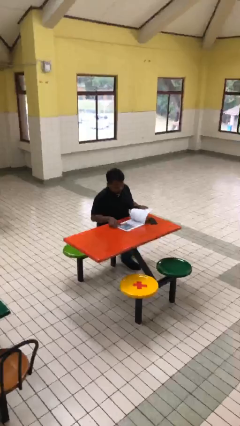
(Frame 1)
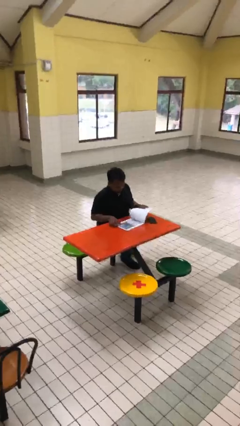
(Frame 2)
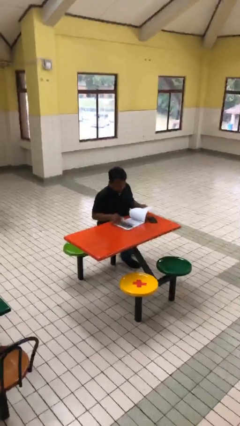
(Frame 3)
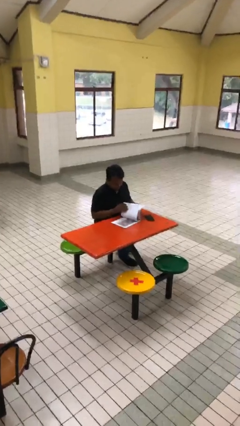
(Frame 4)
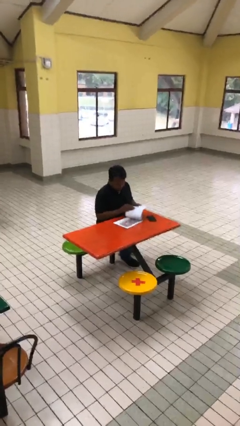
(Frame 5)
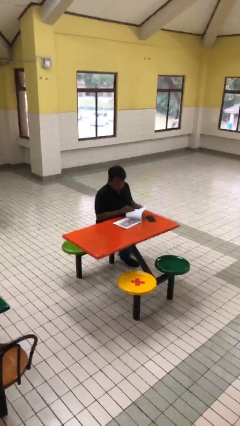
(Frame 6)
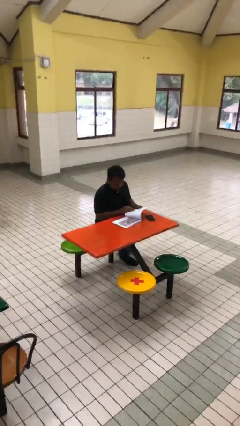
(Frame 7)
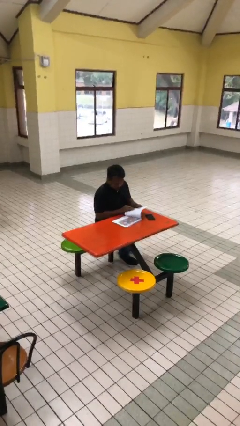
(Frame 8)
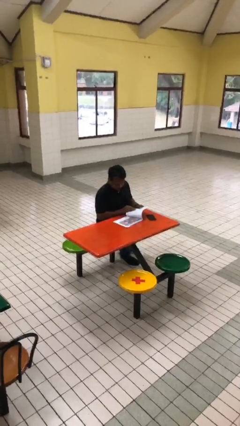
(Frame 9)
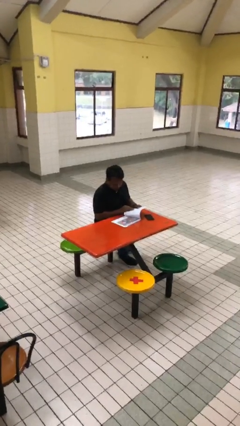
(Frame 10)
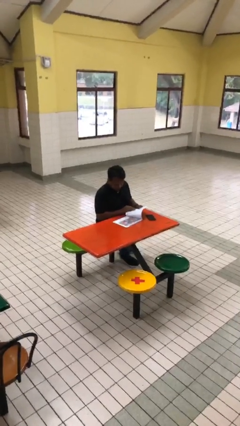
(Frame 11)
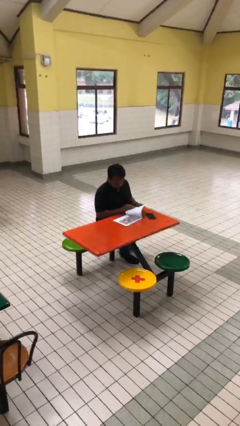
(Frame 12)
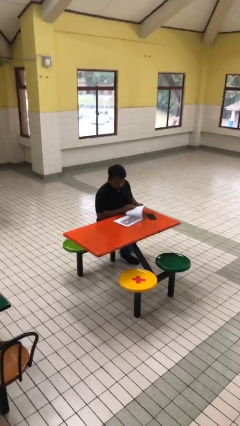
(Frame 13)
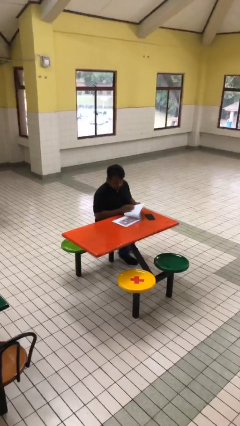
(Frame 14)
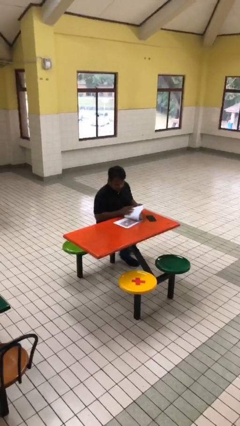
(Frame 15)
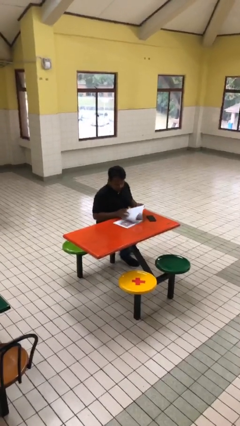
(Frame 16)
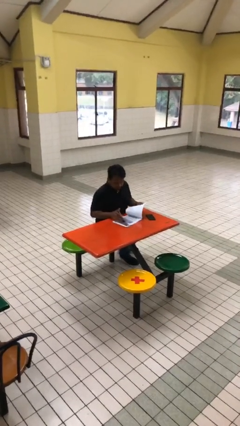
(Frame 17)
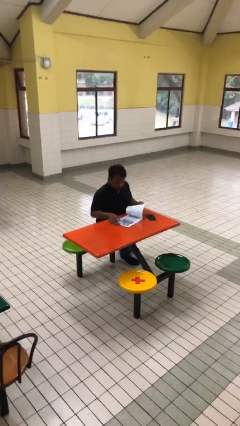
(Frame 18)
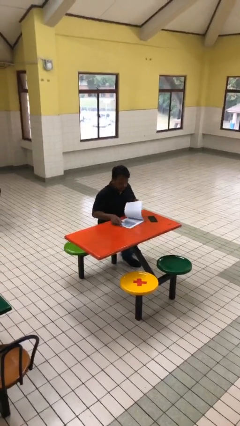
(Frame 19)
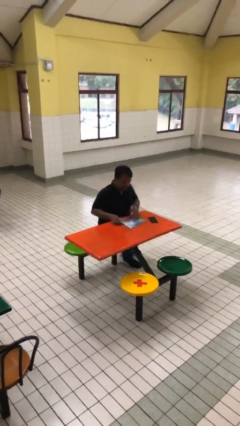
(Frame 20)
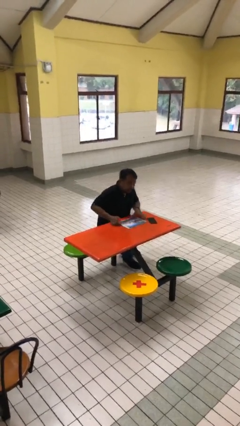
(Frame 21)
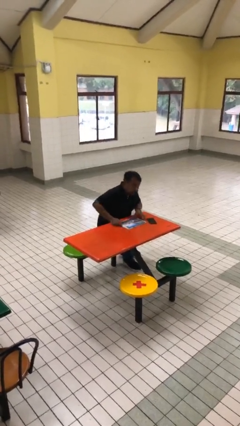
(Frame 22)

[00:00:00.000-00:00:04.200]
person reads document

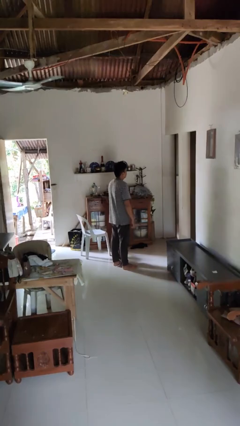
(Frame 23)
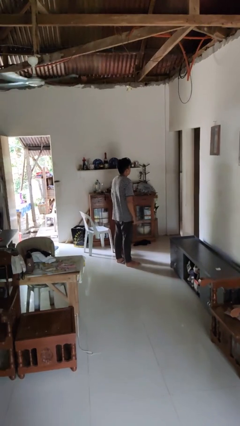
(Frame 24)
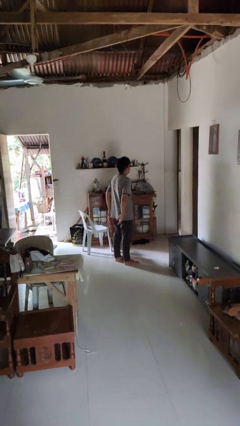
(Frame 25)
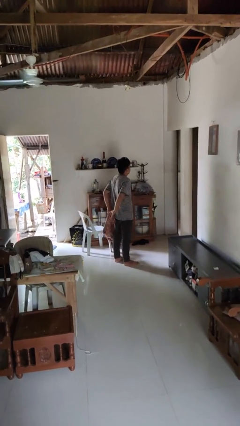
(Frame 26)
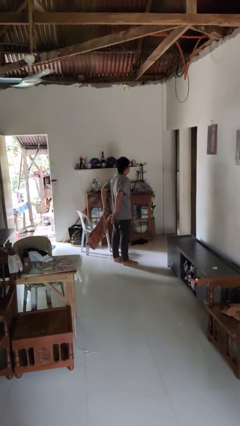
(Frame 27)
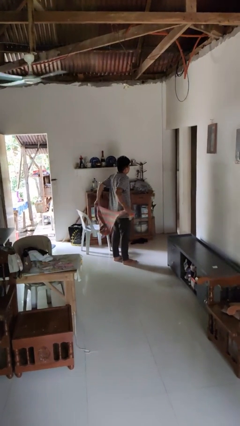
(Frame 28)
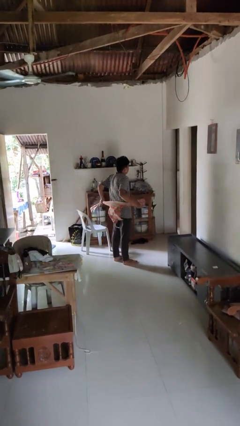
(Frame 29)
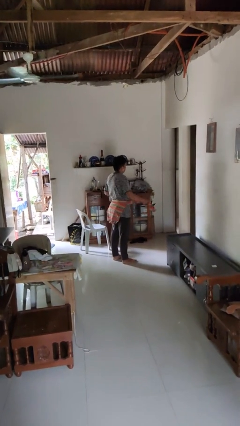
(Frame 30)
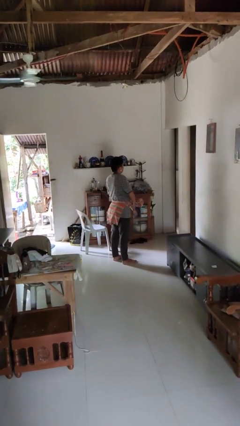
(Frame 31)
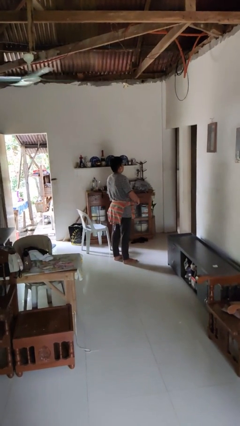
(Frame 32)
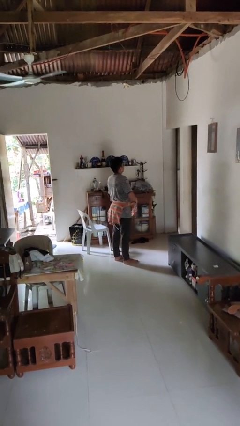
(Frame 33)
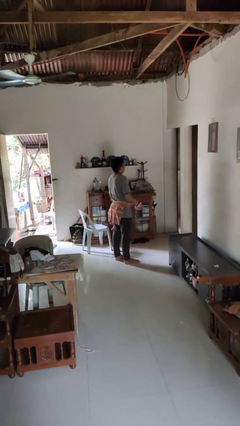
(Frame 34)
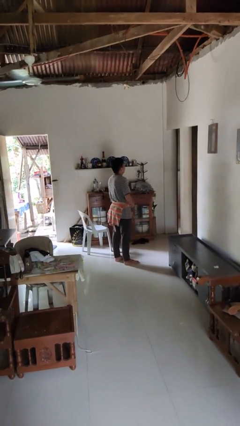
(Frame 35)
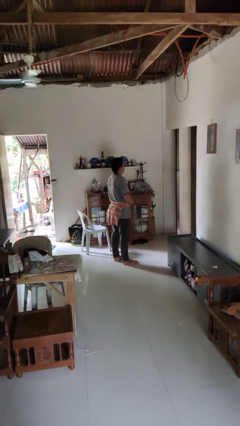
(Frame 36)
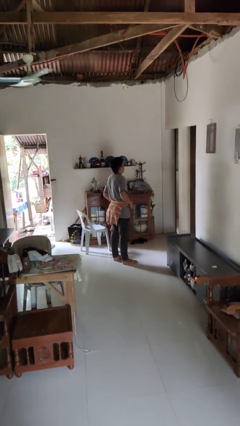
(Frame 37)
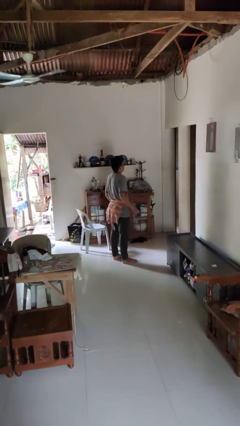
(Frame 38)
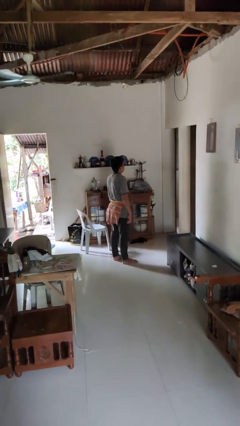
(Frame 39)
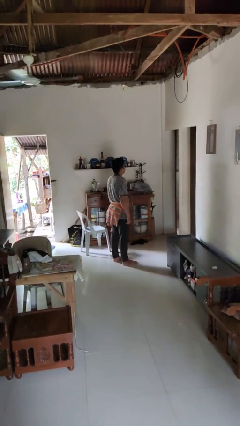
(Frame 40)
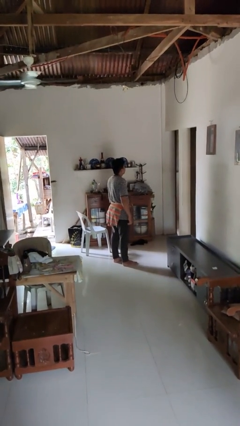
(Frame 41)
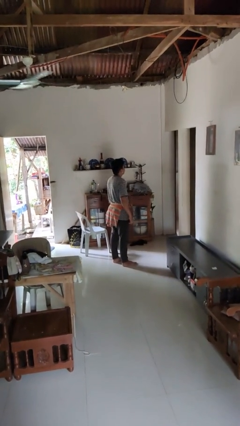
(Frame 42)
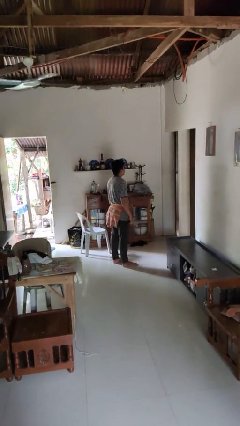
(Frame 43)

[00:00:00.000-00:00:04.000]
person ties jacket around waist

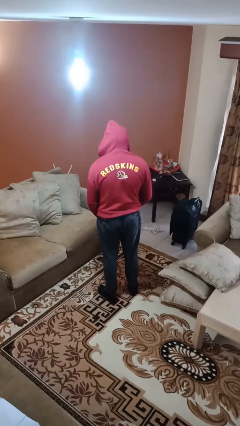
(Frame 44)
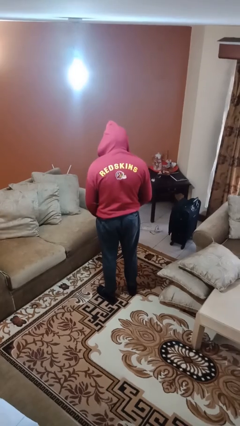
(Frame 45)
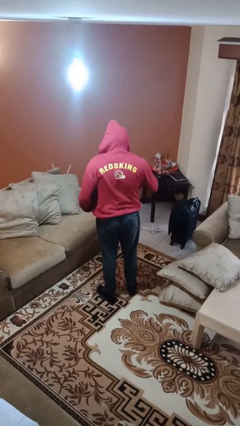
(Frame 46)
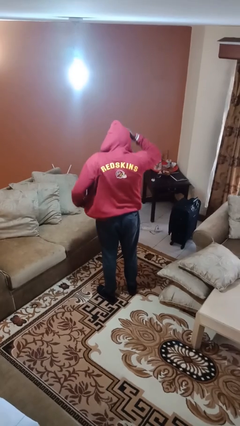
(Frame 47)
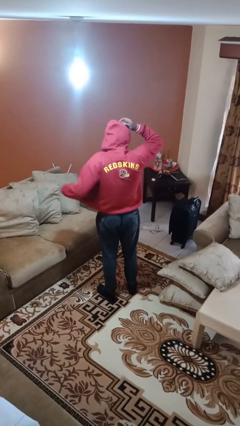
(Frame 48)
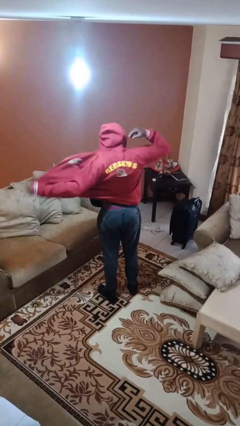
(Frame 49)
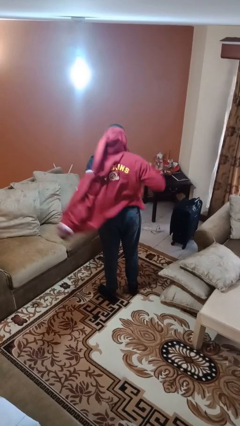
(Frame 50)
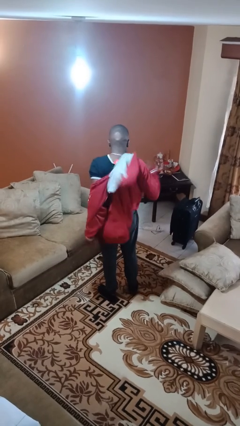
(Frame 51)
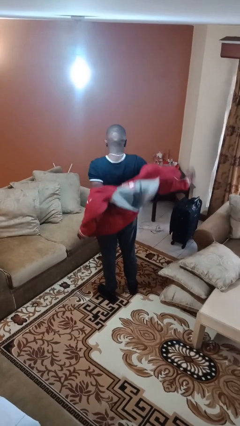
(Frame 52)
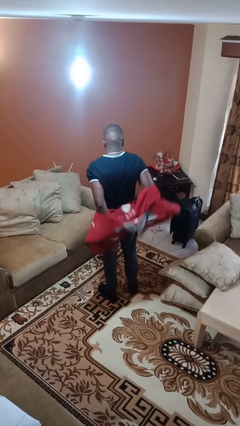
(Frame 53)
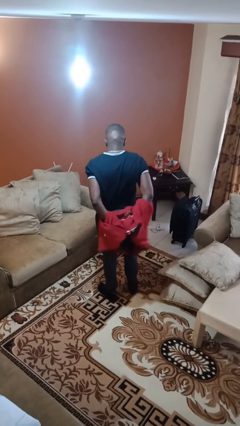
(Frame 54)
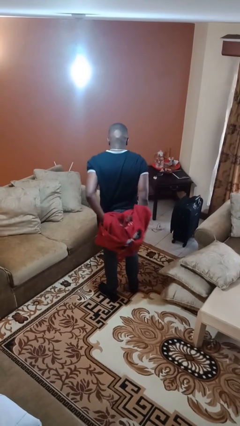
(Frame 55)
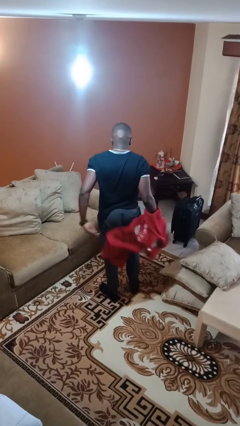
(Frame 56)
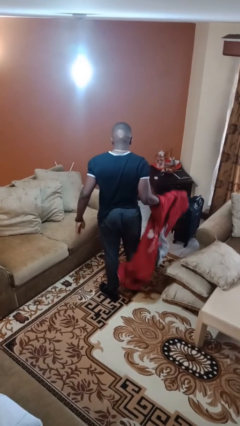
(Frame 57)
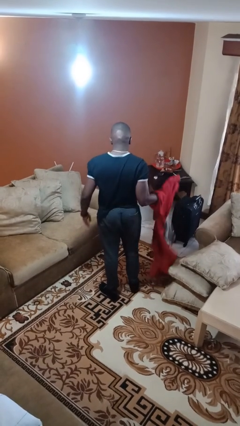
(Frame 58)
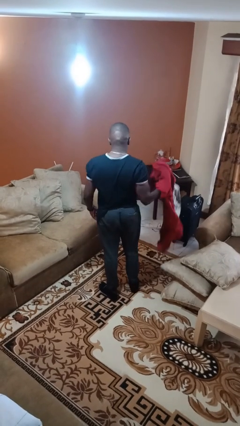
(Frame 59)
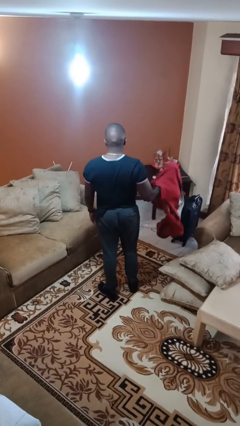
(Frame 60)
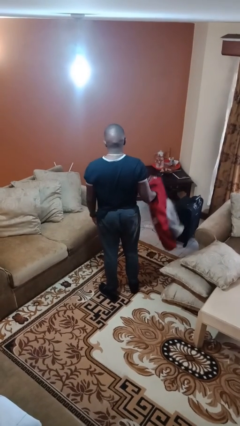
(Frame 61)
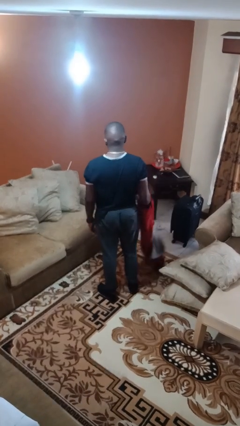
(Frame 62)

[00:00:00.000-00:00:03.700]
person takes off hoodie

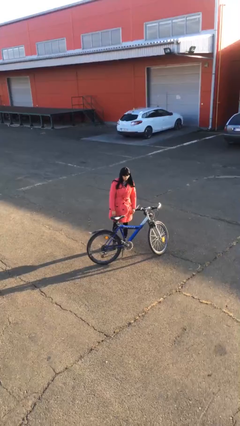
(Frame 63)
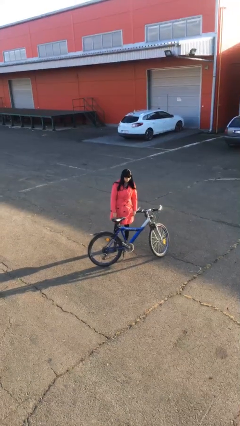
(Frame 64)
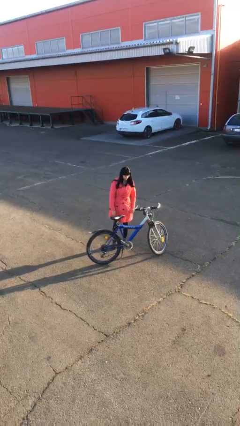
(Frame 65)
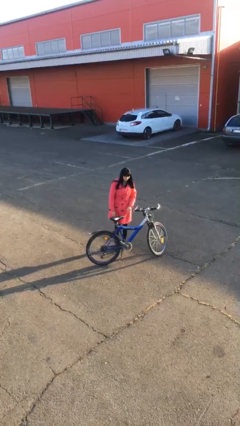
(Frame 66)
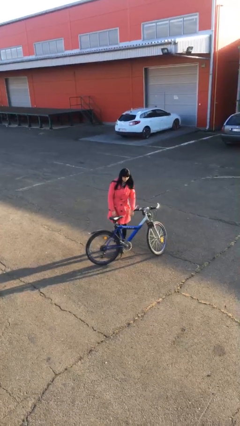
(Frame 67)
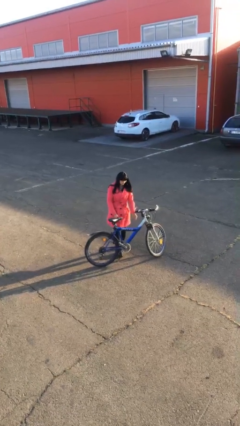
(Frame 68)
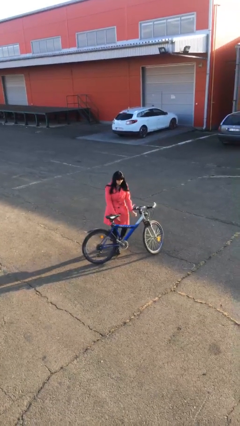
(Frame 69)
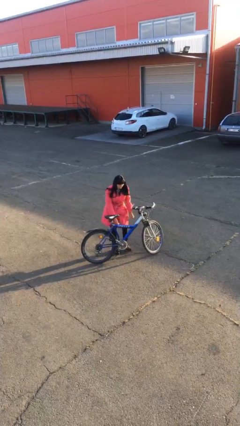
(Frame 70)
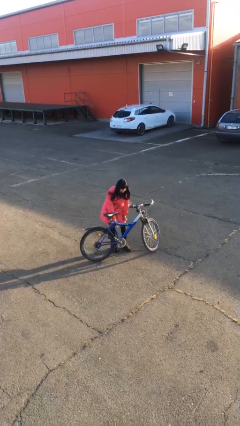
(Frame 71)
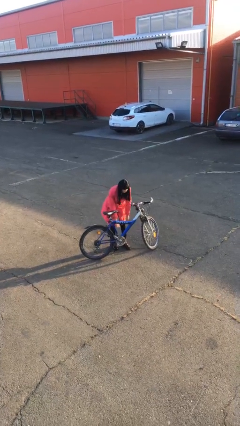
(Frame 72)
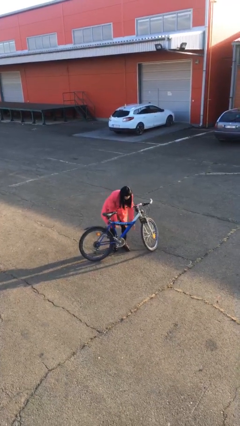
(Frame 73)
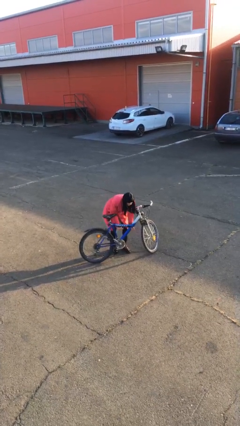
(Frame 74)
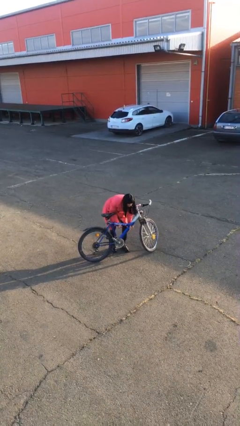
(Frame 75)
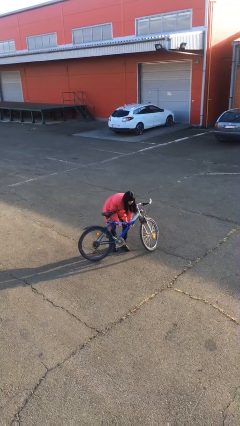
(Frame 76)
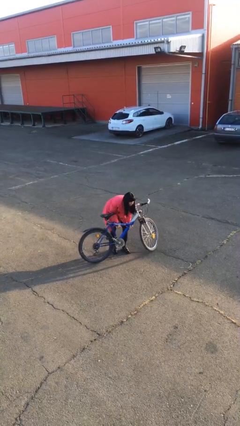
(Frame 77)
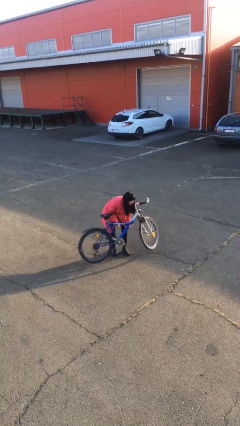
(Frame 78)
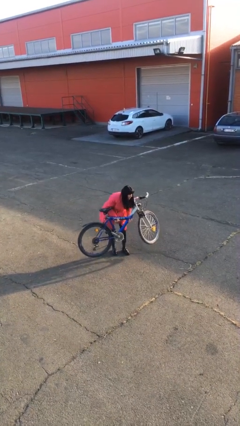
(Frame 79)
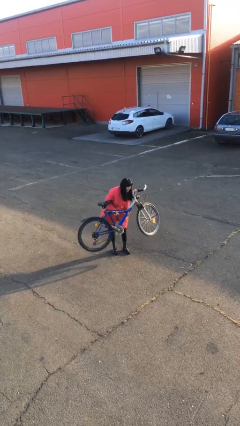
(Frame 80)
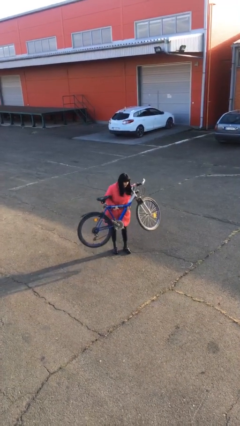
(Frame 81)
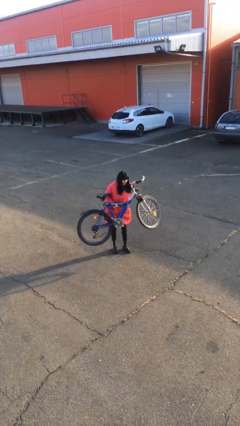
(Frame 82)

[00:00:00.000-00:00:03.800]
person picks up object from floor

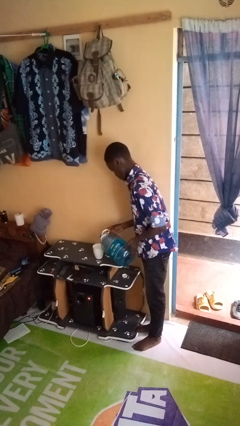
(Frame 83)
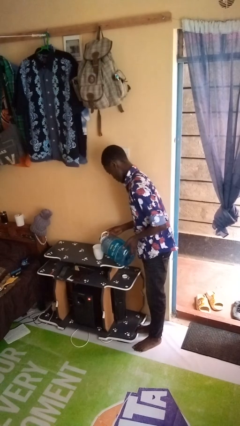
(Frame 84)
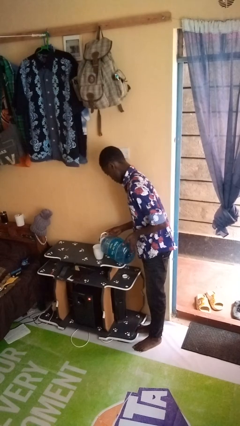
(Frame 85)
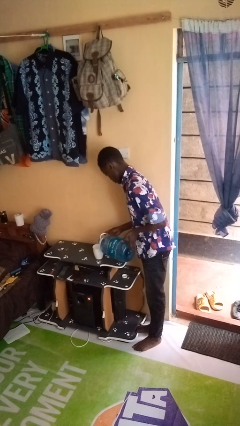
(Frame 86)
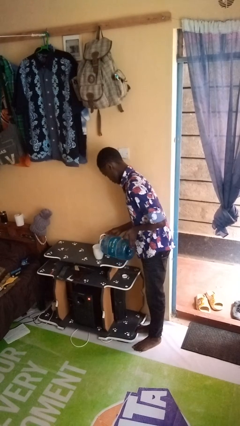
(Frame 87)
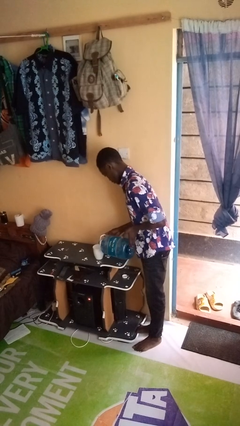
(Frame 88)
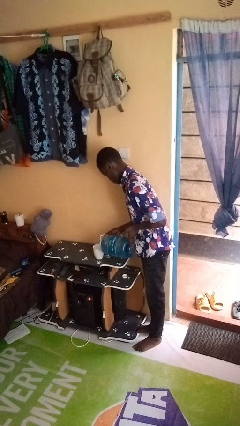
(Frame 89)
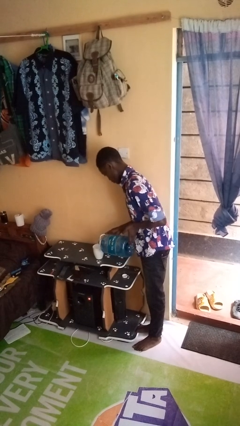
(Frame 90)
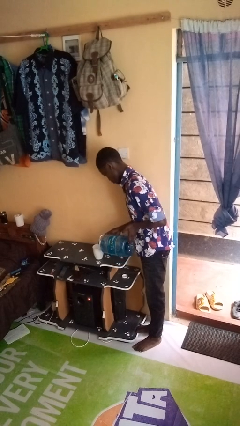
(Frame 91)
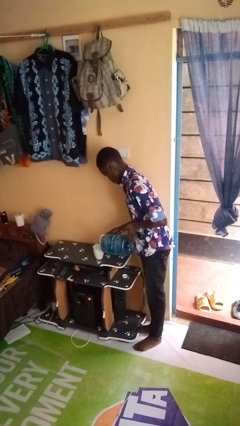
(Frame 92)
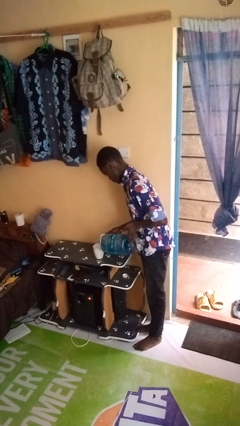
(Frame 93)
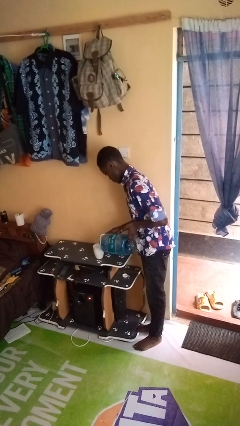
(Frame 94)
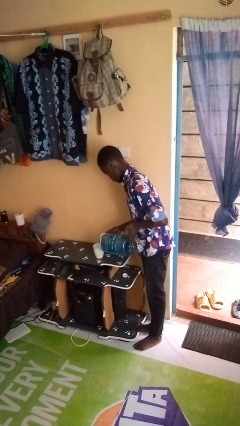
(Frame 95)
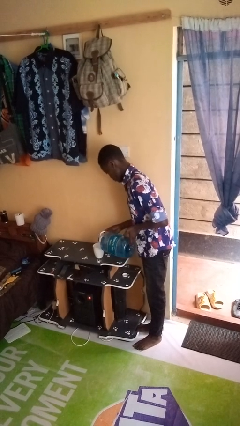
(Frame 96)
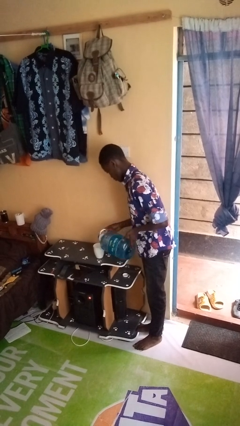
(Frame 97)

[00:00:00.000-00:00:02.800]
person pours liquid into cup
